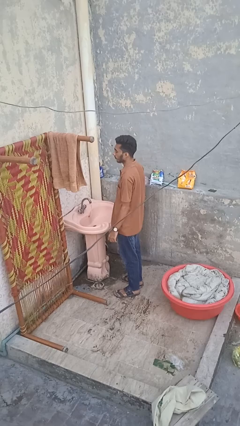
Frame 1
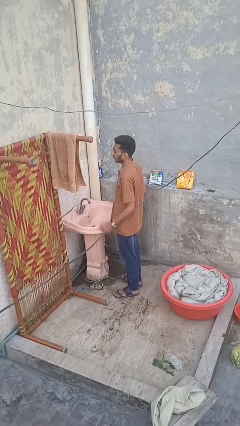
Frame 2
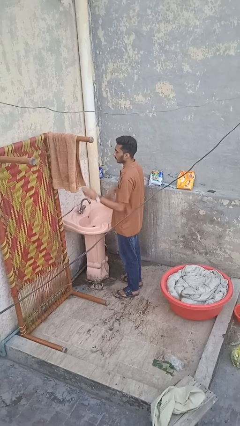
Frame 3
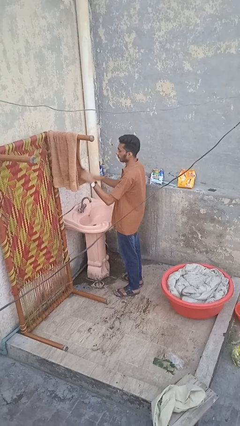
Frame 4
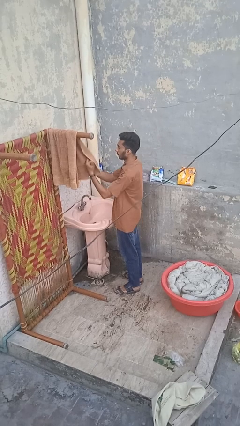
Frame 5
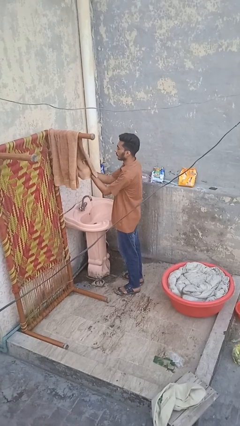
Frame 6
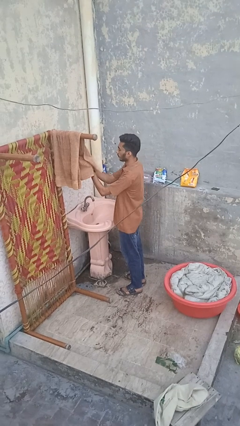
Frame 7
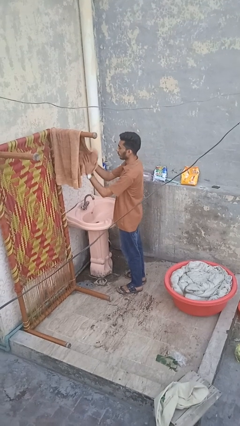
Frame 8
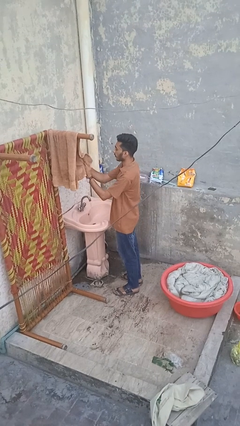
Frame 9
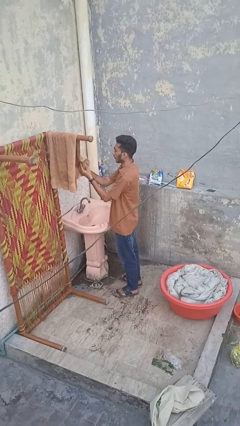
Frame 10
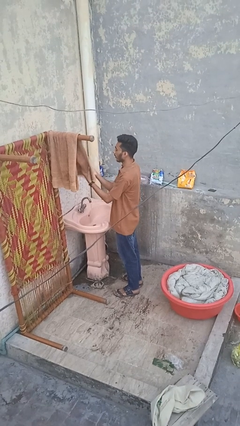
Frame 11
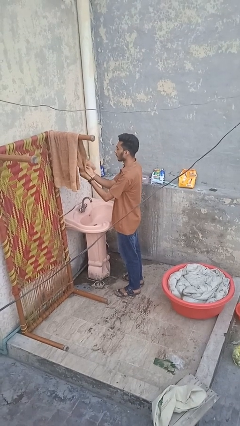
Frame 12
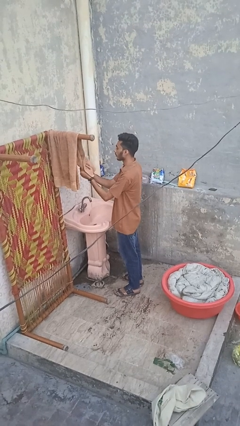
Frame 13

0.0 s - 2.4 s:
person dries hands with towel

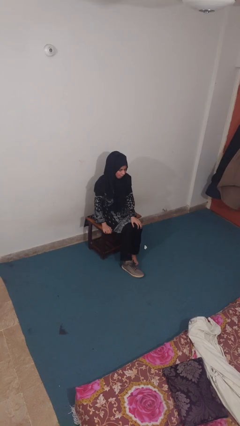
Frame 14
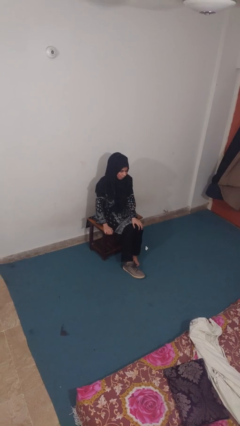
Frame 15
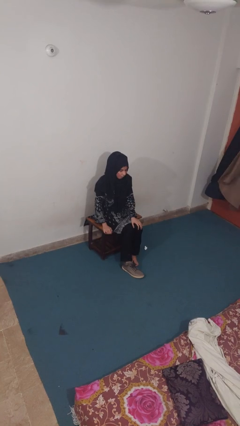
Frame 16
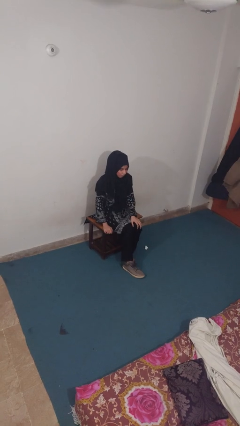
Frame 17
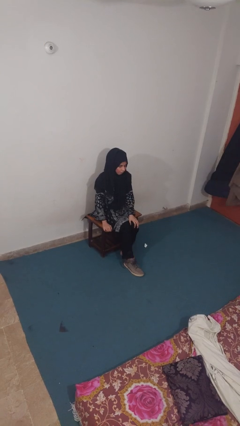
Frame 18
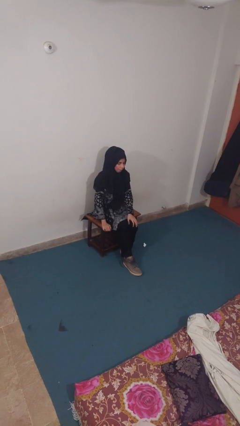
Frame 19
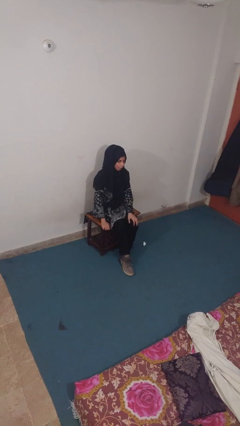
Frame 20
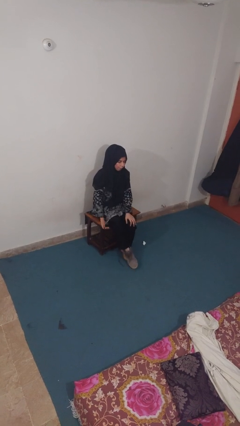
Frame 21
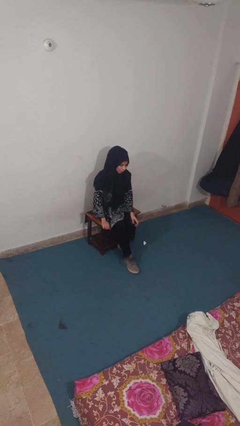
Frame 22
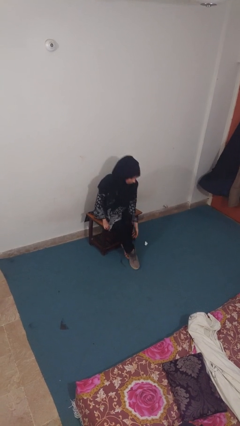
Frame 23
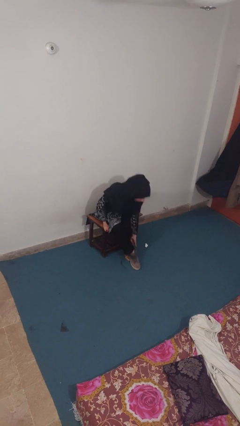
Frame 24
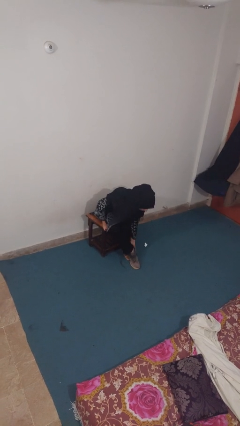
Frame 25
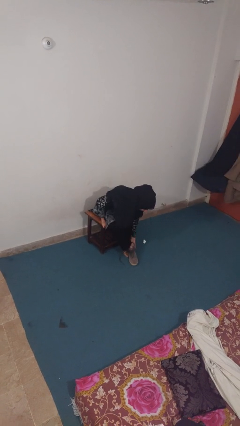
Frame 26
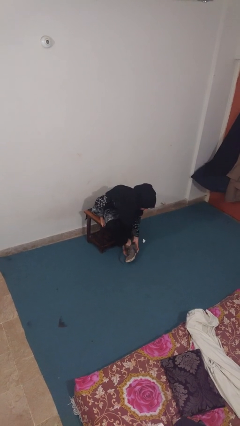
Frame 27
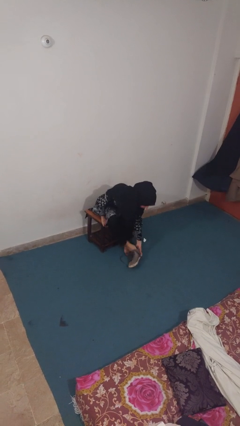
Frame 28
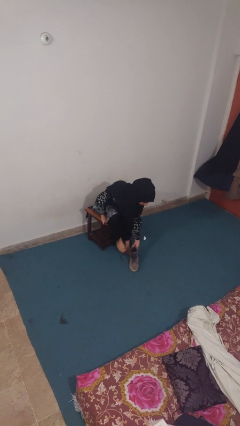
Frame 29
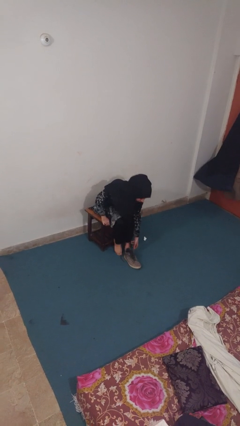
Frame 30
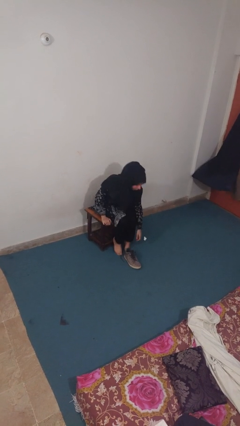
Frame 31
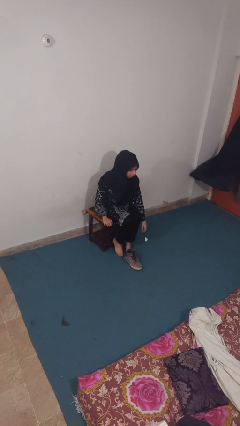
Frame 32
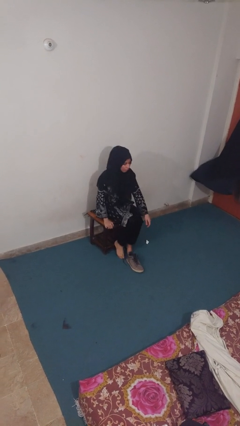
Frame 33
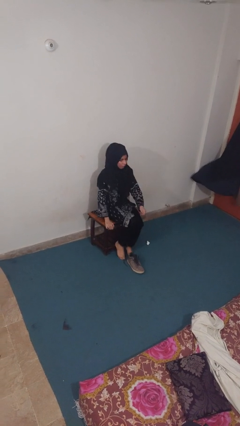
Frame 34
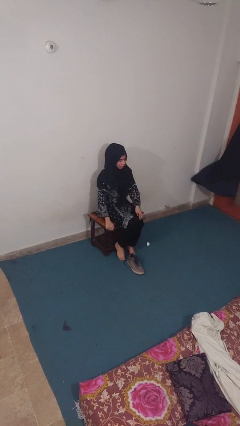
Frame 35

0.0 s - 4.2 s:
person takes off boots

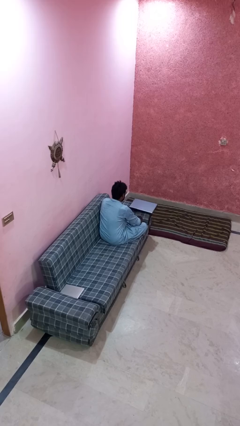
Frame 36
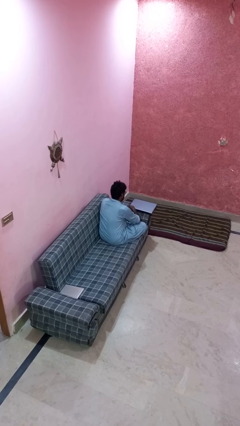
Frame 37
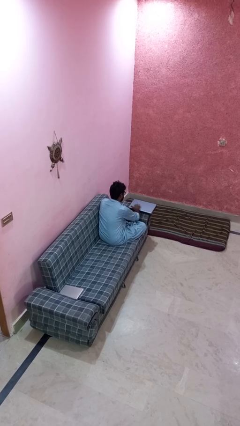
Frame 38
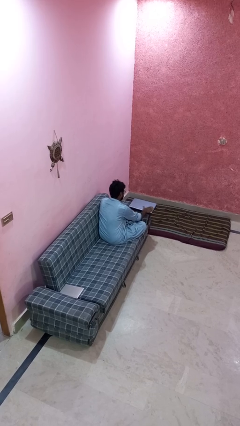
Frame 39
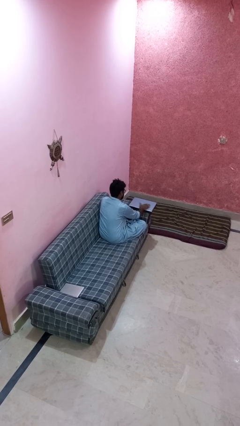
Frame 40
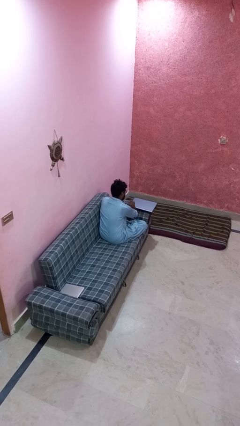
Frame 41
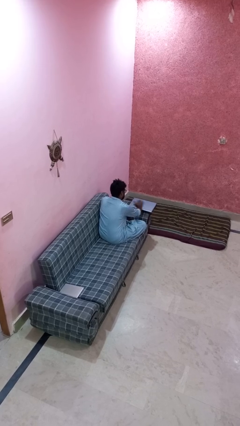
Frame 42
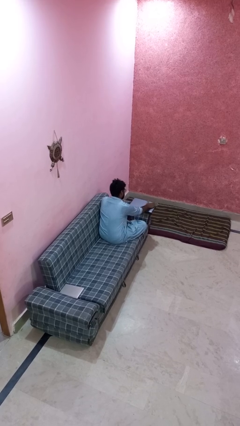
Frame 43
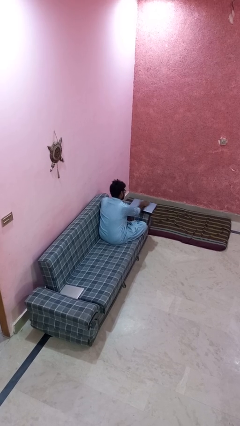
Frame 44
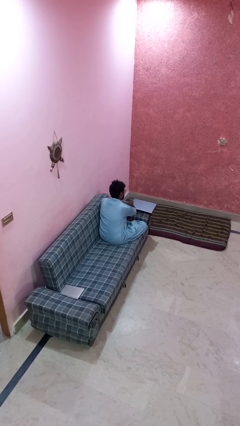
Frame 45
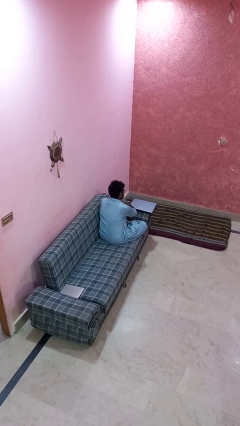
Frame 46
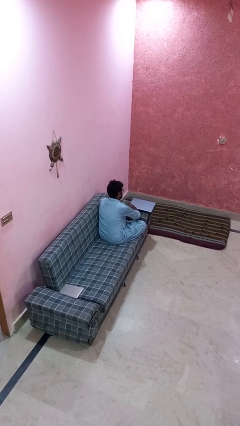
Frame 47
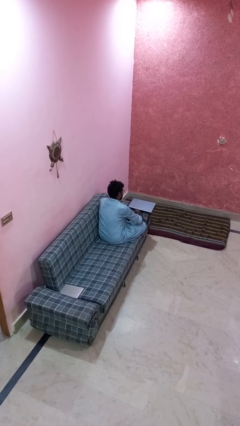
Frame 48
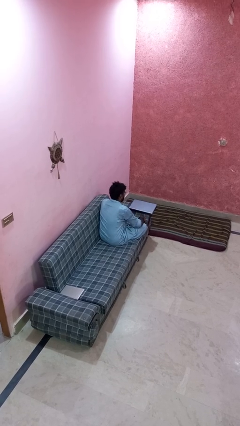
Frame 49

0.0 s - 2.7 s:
person waves hand over object

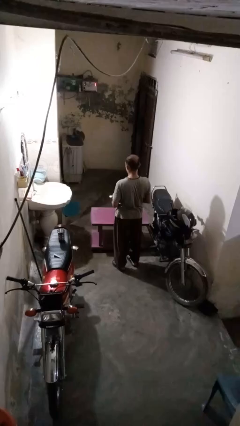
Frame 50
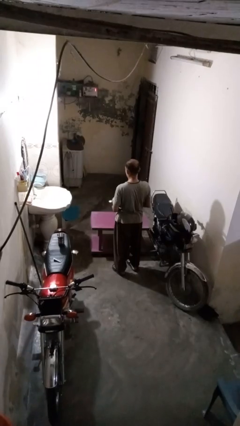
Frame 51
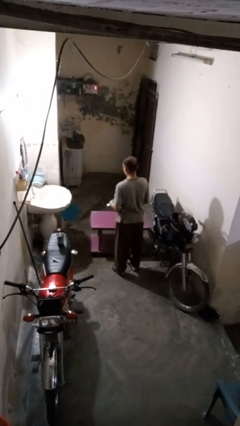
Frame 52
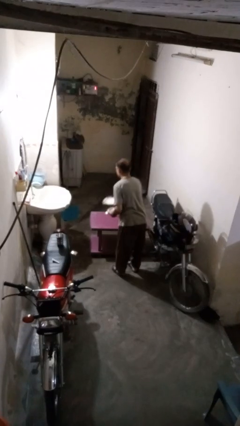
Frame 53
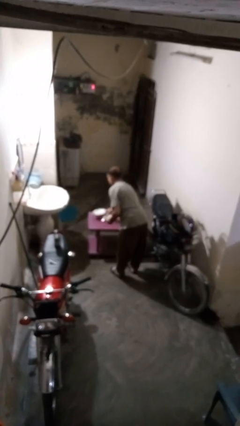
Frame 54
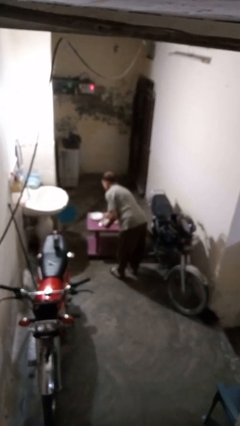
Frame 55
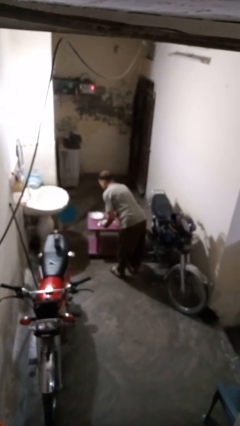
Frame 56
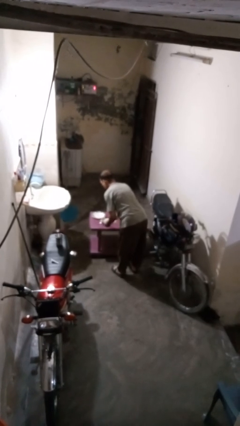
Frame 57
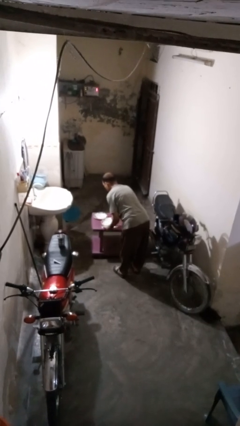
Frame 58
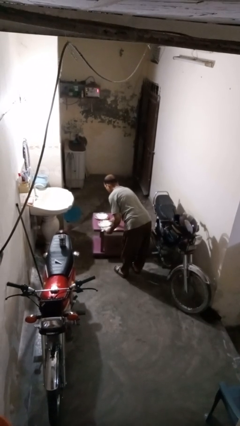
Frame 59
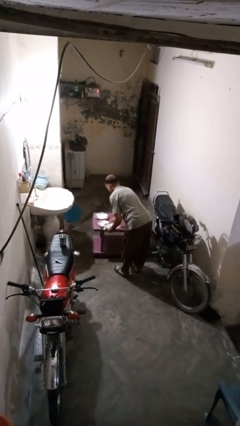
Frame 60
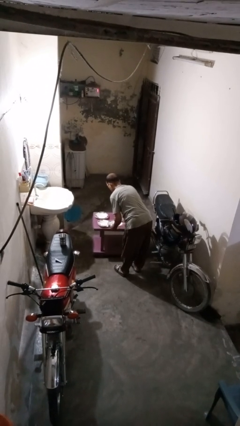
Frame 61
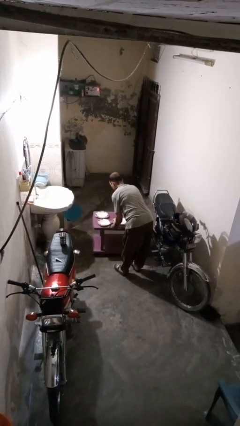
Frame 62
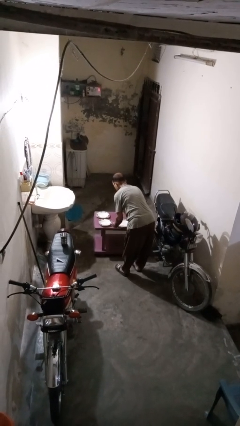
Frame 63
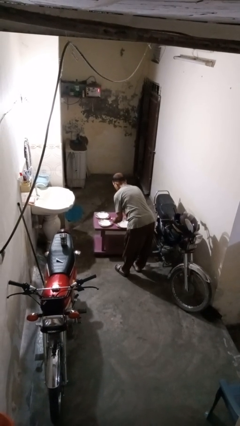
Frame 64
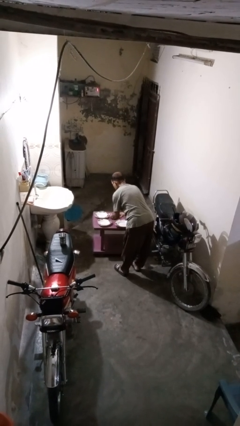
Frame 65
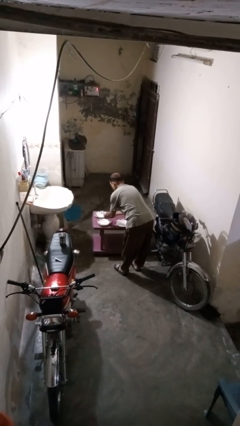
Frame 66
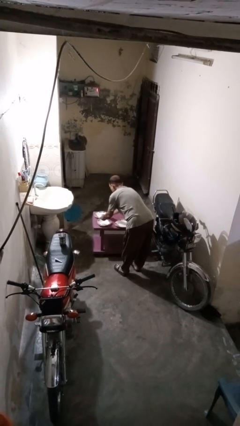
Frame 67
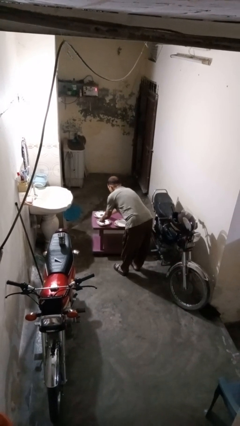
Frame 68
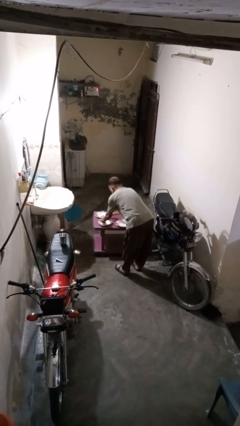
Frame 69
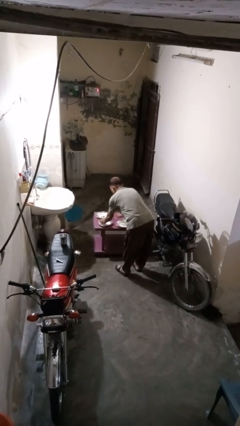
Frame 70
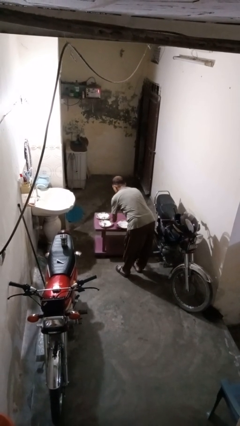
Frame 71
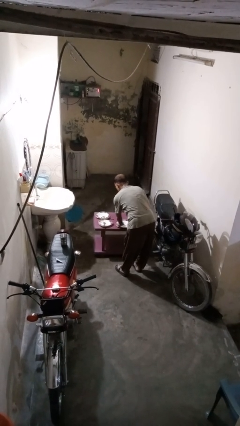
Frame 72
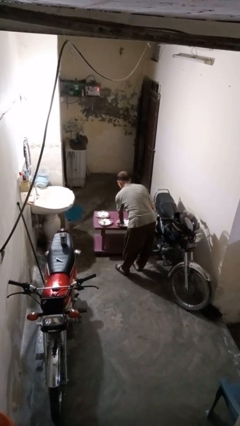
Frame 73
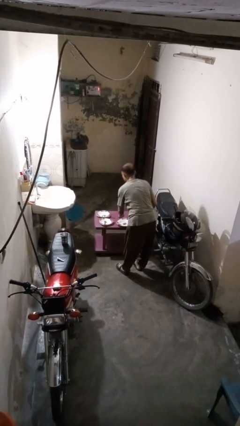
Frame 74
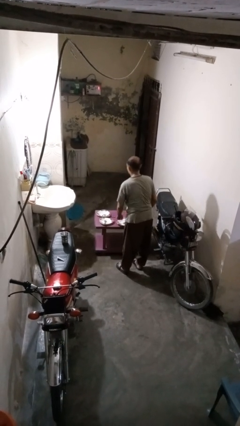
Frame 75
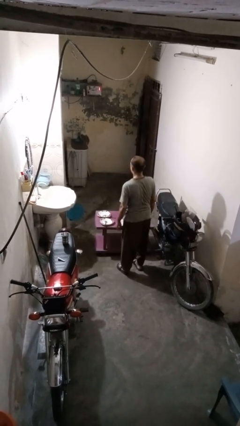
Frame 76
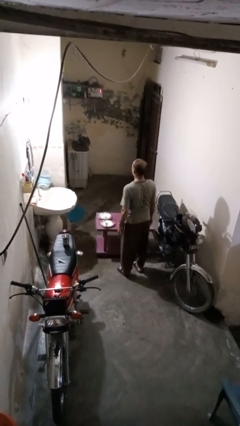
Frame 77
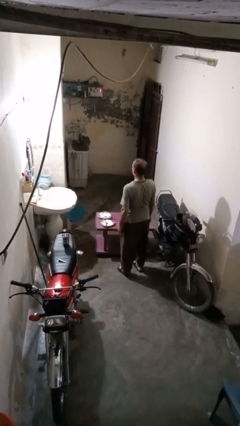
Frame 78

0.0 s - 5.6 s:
person sets table

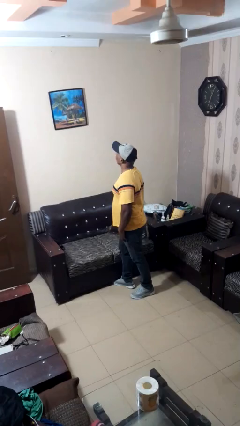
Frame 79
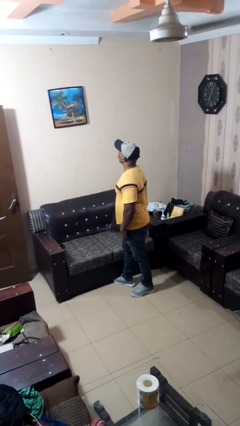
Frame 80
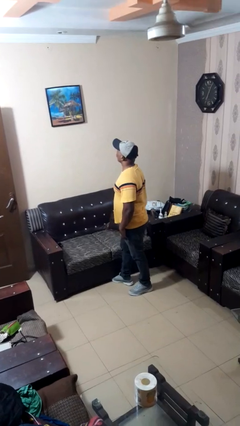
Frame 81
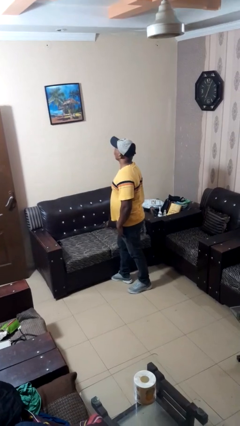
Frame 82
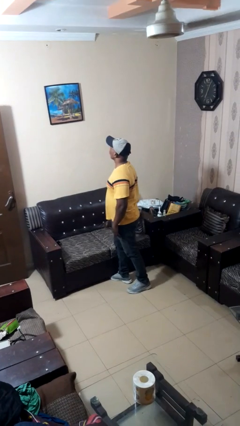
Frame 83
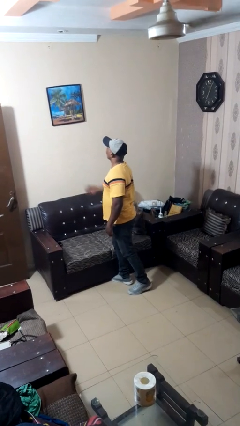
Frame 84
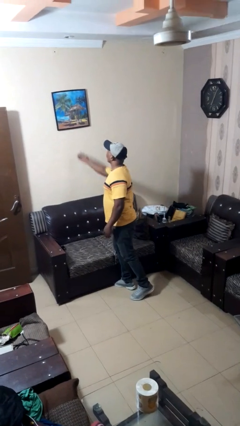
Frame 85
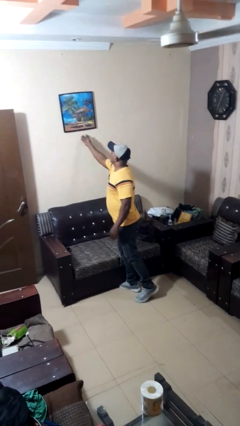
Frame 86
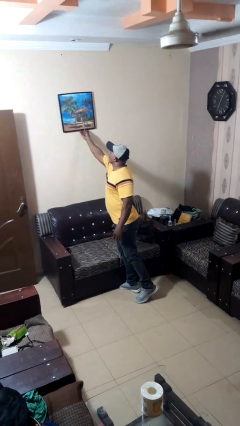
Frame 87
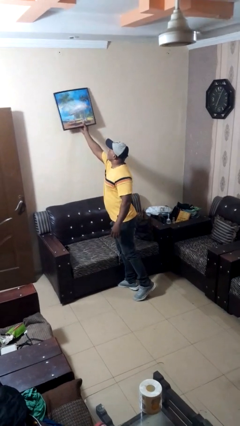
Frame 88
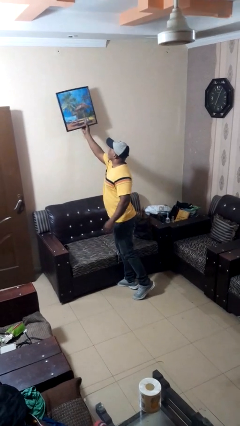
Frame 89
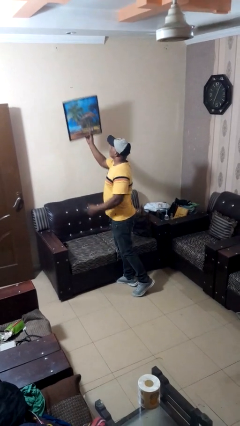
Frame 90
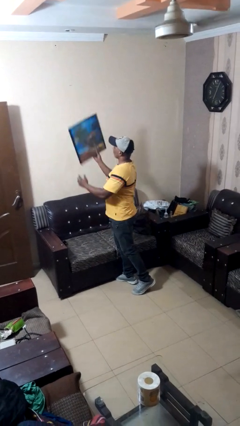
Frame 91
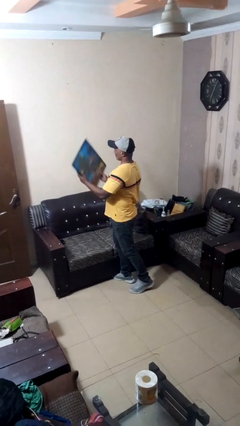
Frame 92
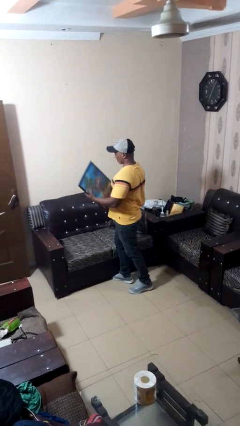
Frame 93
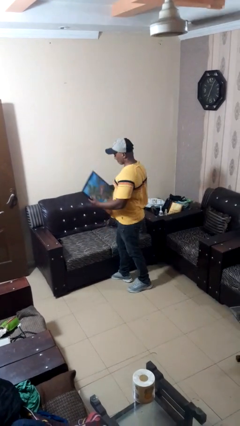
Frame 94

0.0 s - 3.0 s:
person takes down picture frame
